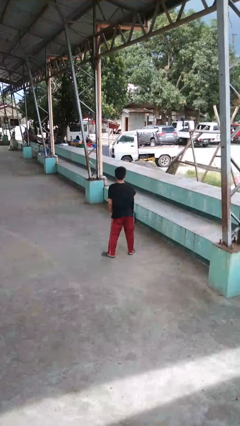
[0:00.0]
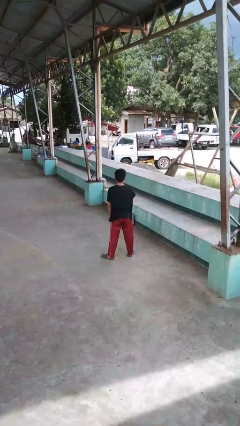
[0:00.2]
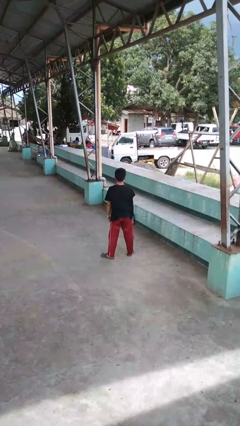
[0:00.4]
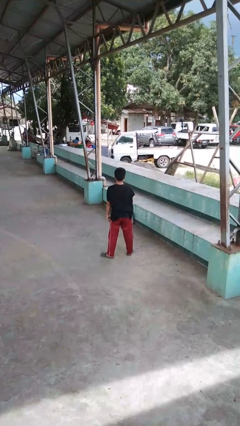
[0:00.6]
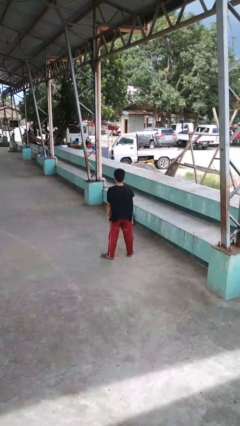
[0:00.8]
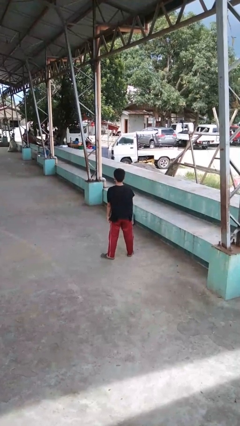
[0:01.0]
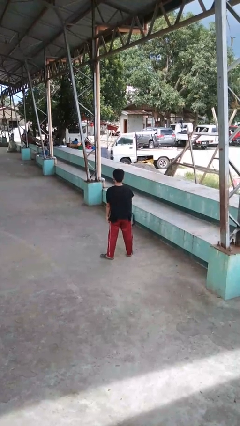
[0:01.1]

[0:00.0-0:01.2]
person stands up

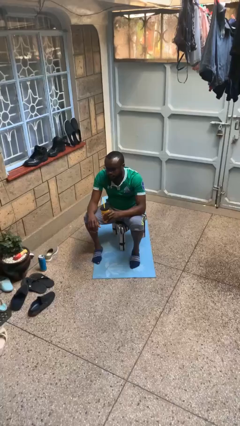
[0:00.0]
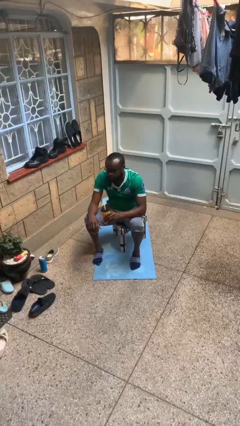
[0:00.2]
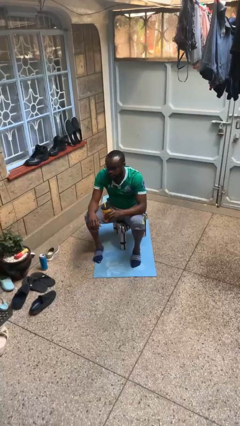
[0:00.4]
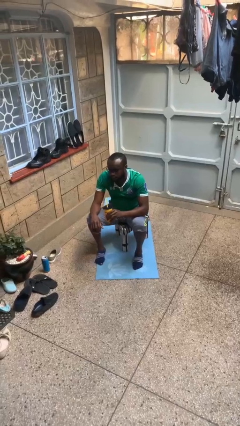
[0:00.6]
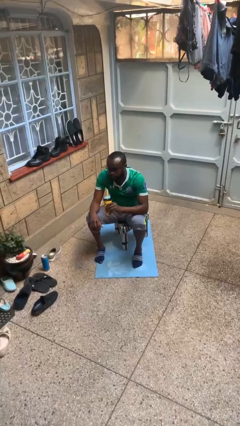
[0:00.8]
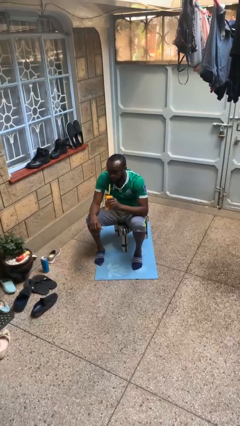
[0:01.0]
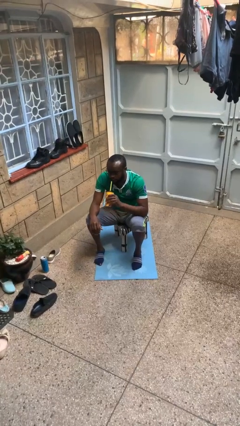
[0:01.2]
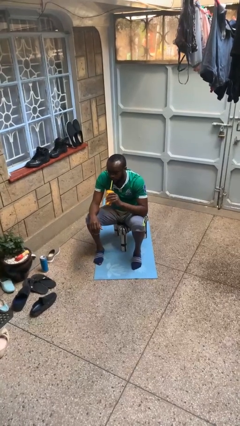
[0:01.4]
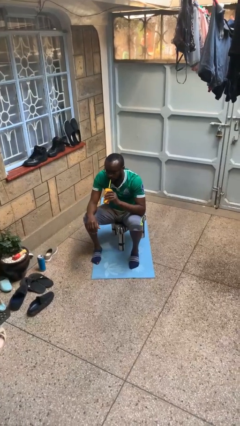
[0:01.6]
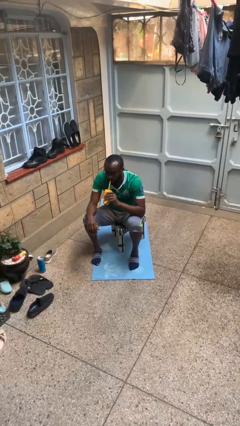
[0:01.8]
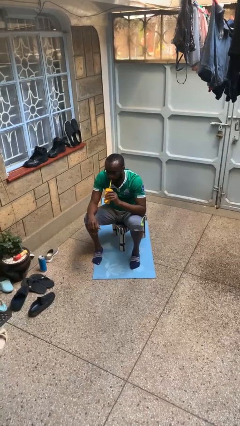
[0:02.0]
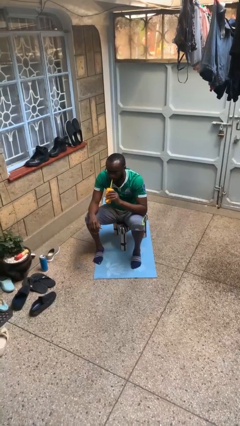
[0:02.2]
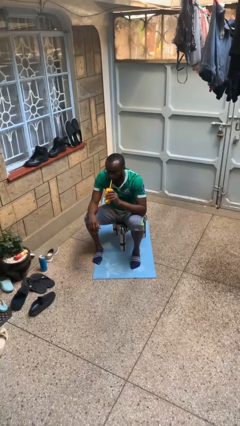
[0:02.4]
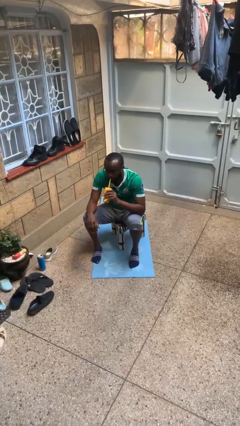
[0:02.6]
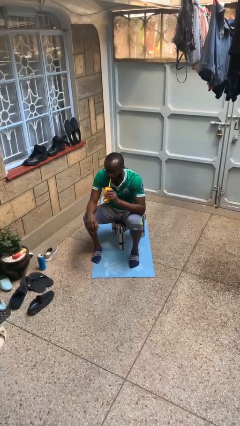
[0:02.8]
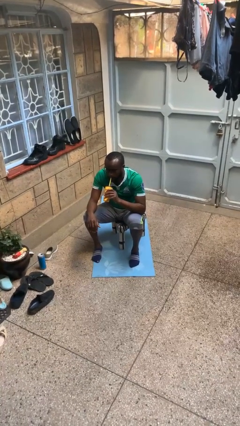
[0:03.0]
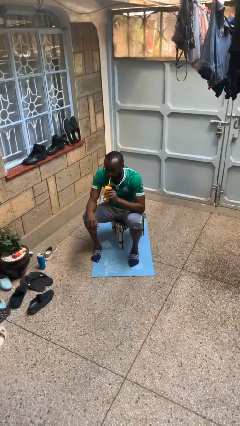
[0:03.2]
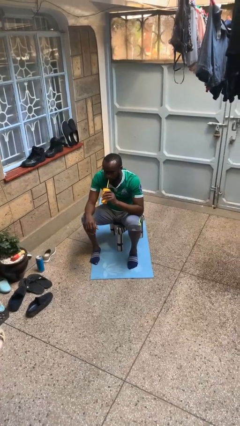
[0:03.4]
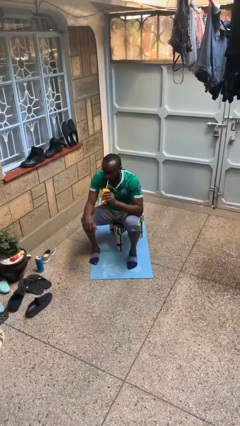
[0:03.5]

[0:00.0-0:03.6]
person drinks from straw

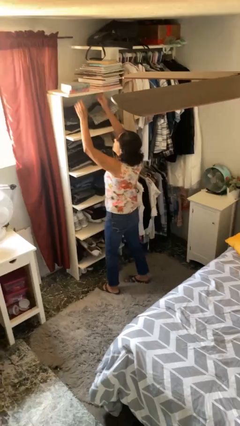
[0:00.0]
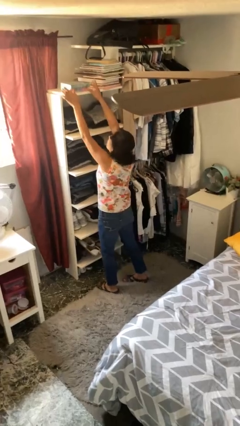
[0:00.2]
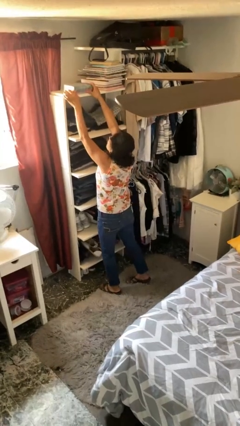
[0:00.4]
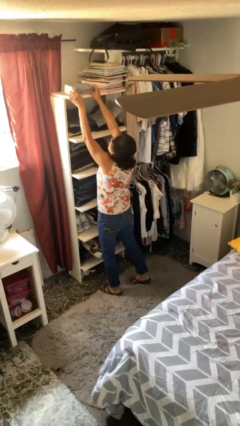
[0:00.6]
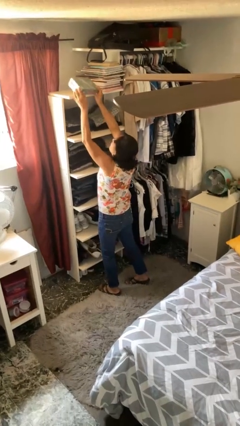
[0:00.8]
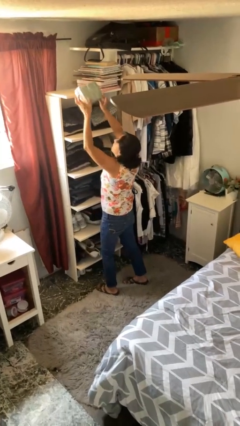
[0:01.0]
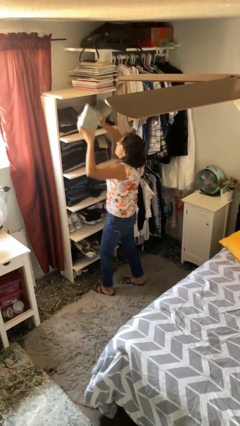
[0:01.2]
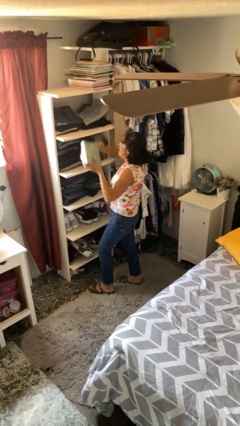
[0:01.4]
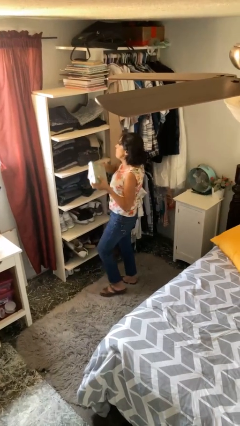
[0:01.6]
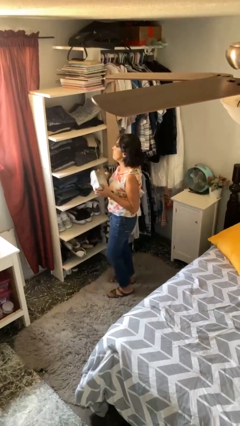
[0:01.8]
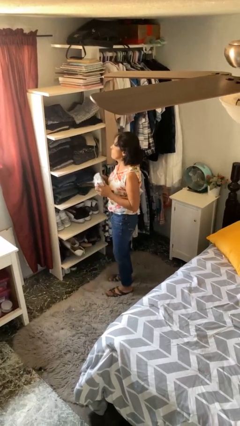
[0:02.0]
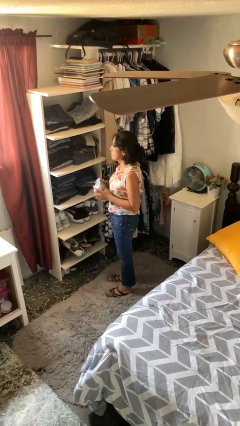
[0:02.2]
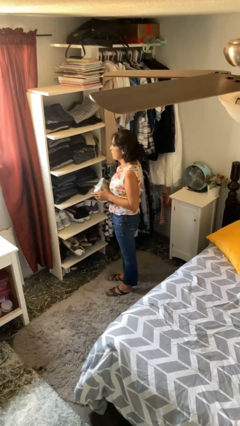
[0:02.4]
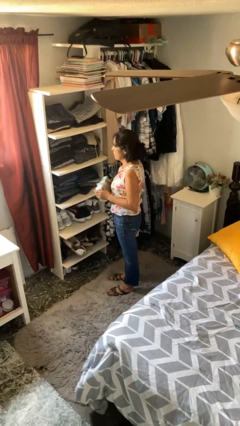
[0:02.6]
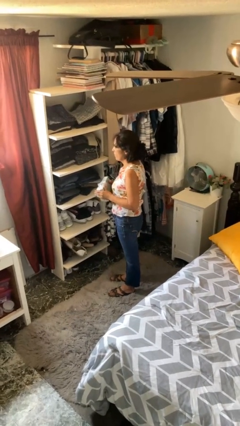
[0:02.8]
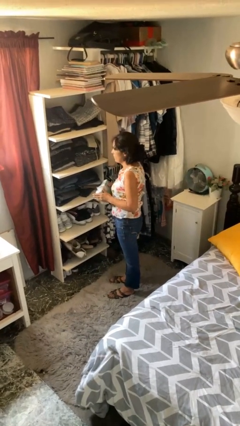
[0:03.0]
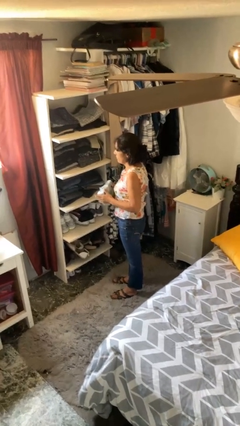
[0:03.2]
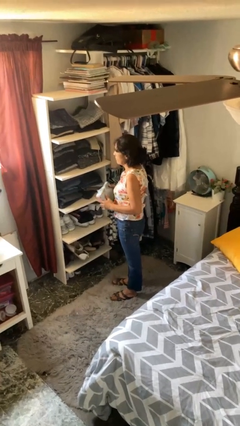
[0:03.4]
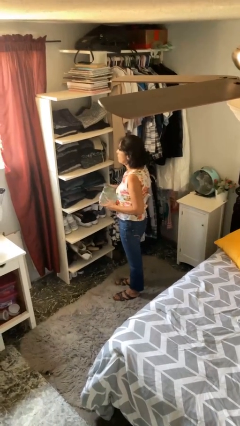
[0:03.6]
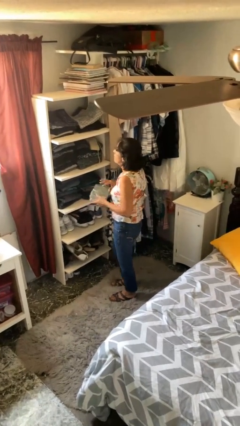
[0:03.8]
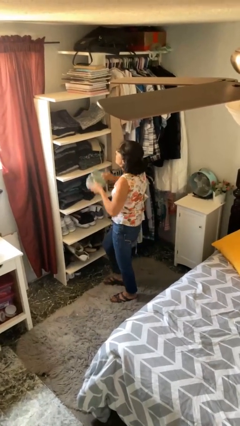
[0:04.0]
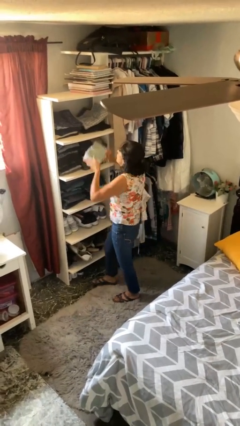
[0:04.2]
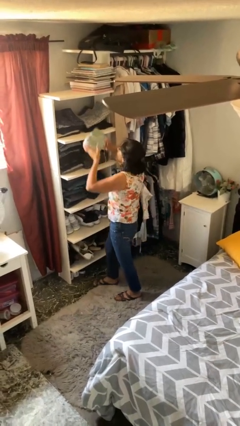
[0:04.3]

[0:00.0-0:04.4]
person picks up object from shelf

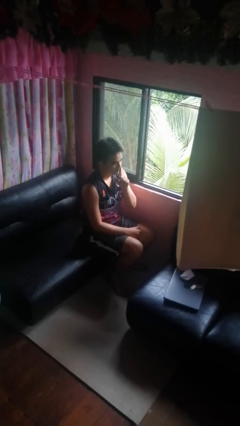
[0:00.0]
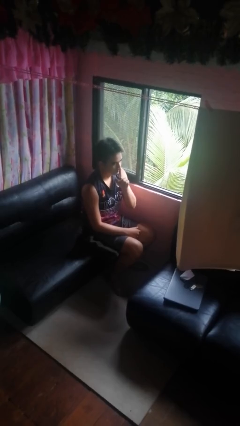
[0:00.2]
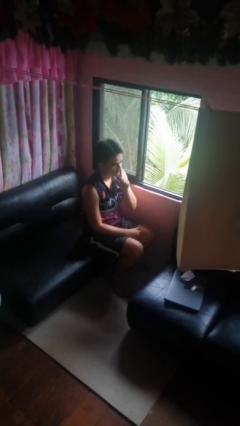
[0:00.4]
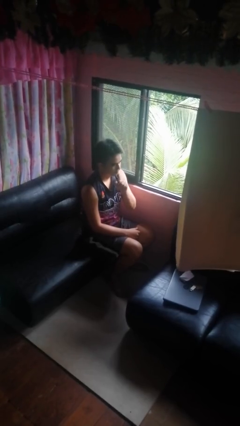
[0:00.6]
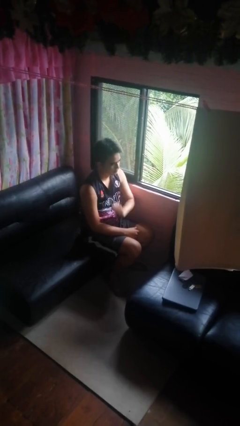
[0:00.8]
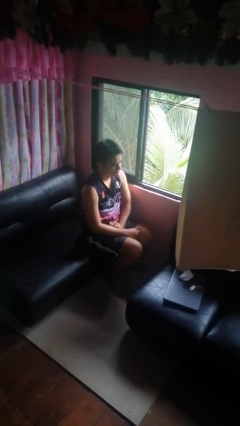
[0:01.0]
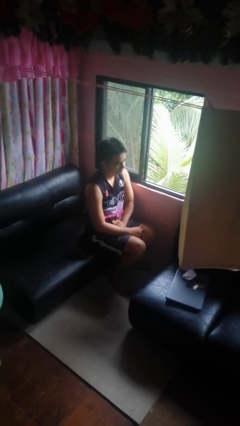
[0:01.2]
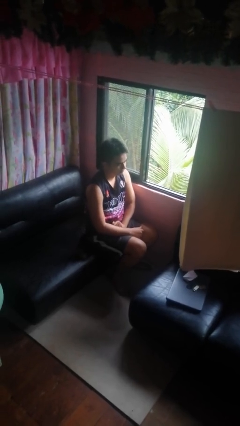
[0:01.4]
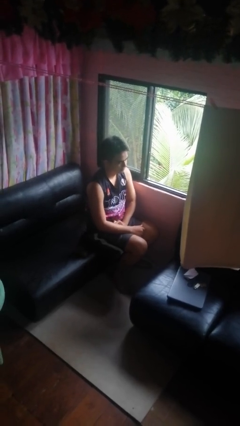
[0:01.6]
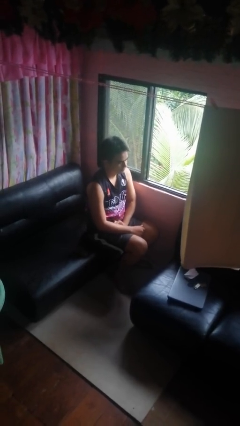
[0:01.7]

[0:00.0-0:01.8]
person gestures be quiet

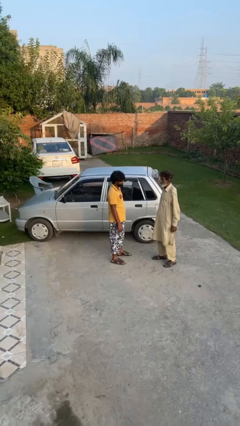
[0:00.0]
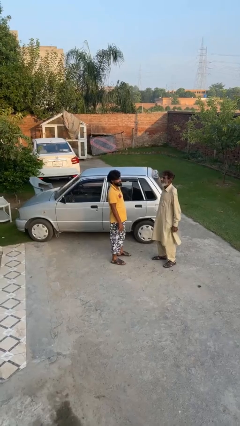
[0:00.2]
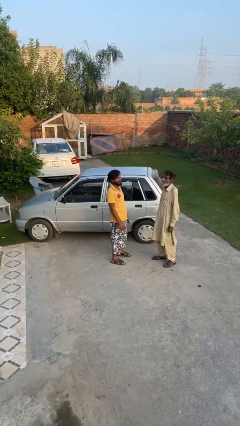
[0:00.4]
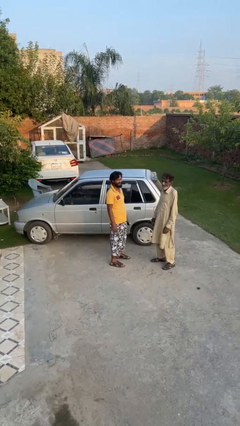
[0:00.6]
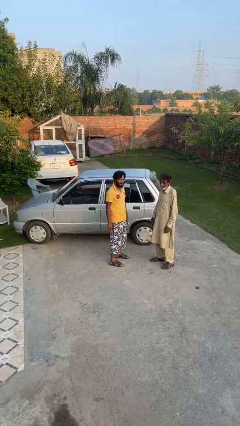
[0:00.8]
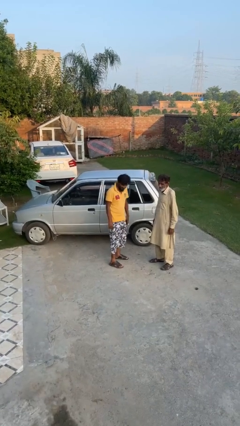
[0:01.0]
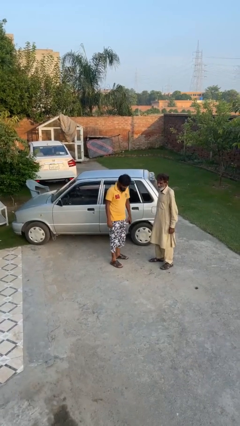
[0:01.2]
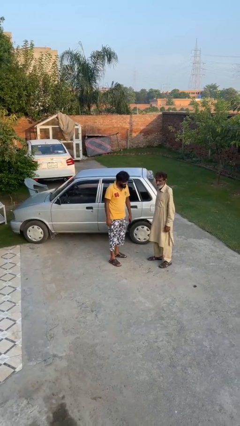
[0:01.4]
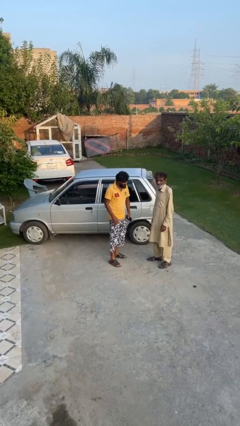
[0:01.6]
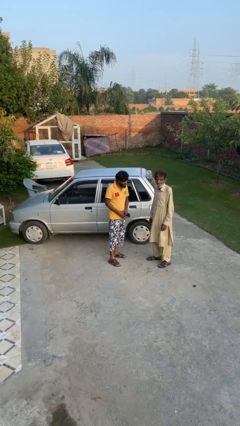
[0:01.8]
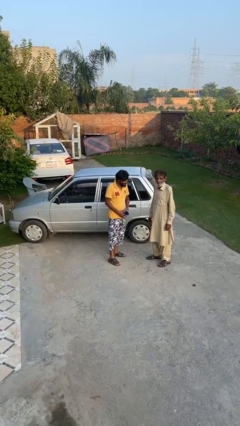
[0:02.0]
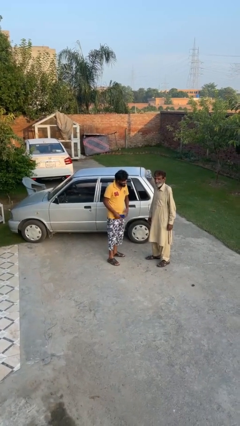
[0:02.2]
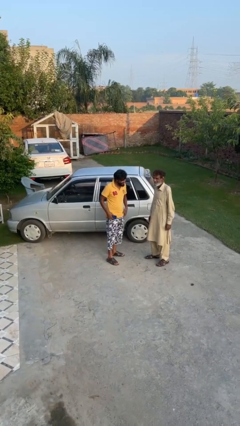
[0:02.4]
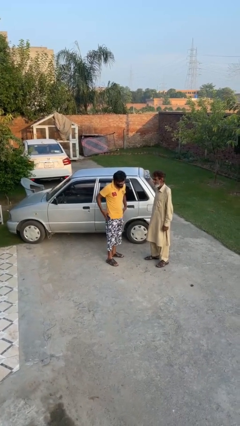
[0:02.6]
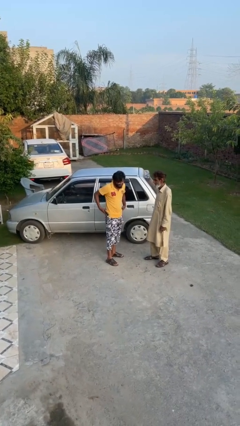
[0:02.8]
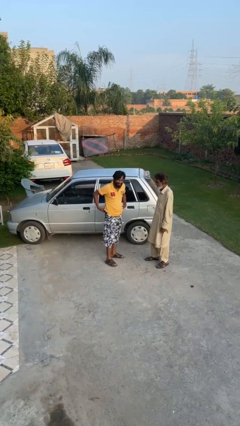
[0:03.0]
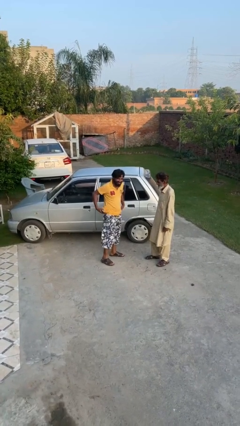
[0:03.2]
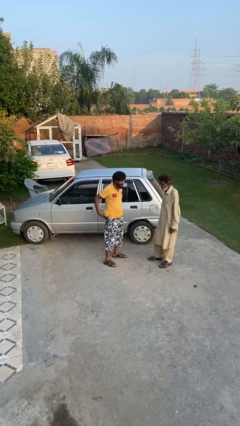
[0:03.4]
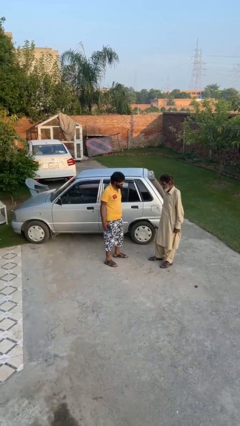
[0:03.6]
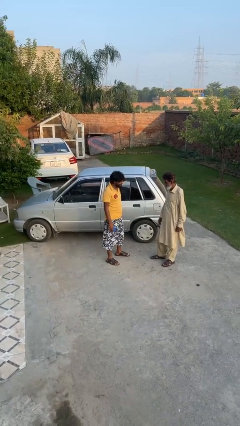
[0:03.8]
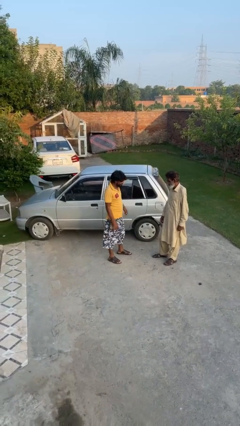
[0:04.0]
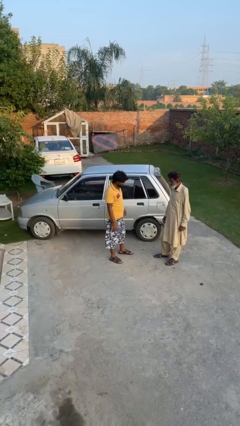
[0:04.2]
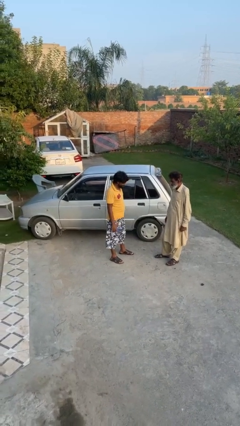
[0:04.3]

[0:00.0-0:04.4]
person laughs with person

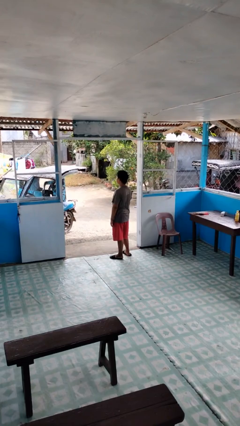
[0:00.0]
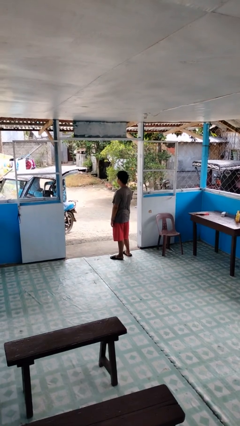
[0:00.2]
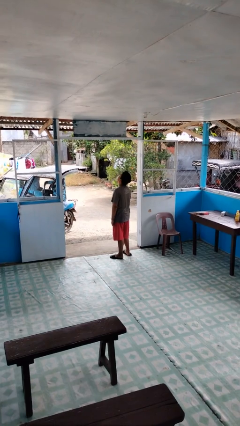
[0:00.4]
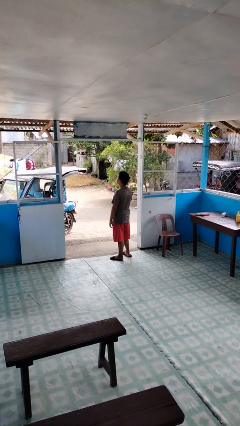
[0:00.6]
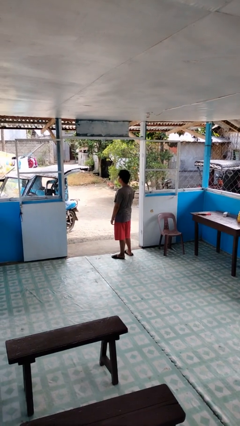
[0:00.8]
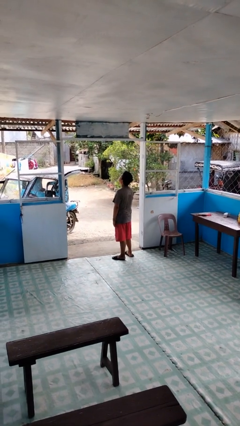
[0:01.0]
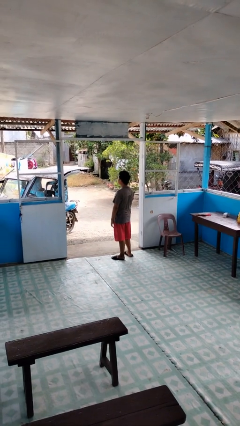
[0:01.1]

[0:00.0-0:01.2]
person nods head

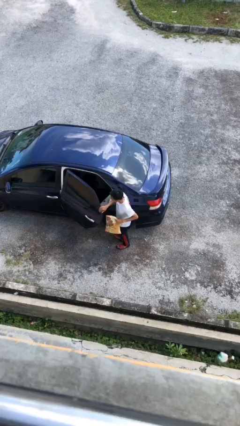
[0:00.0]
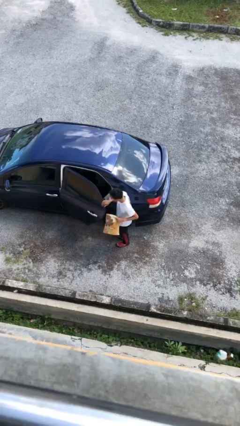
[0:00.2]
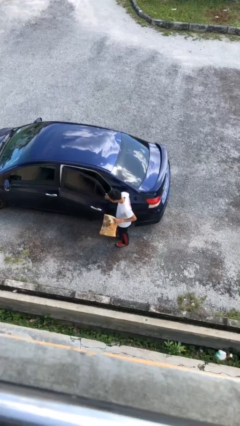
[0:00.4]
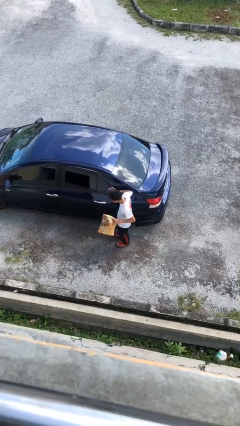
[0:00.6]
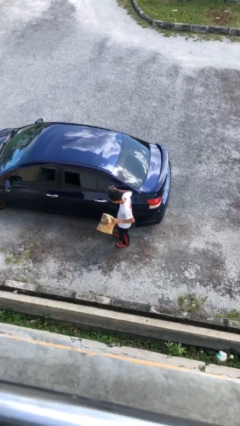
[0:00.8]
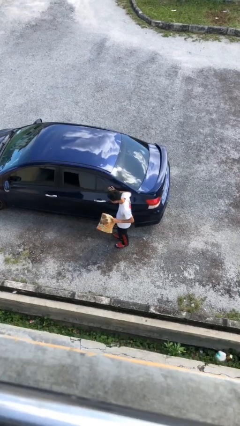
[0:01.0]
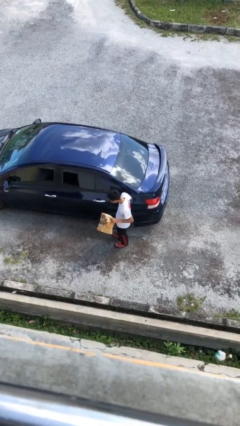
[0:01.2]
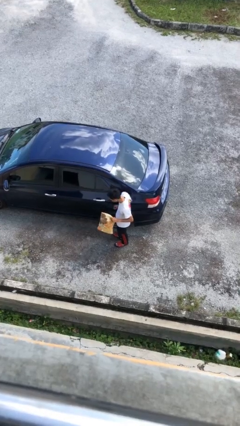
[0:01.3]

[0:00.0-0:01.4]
person closes car door
